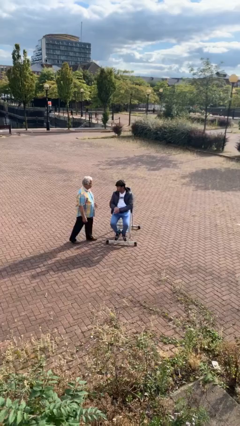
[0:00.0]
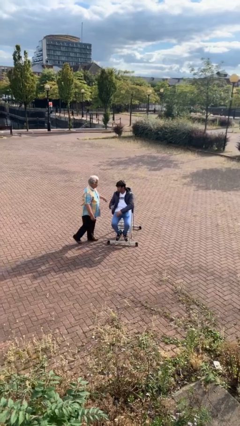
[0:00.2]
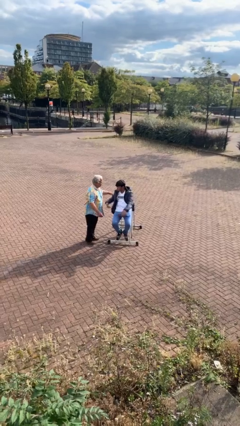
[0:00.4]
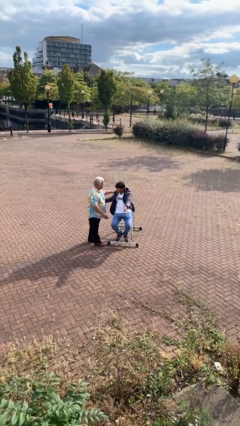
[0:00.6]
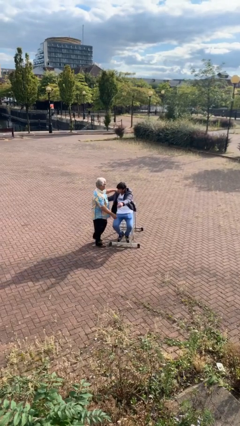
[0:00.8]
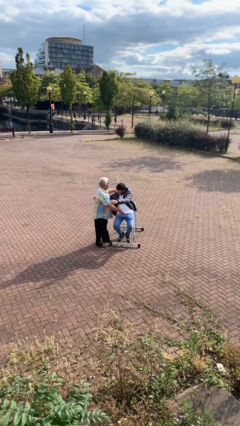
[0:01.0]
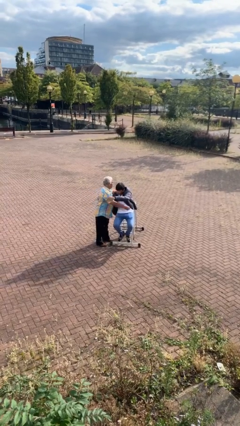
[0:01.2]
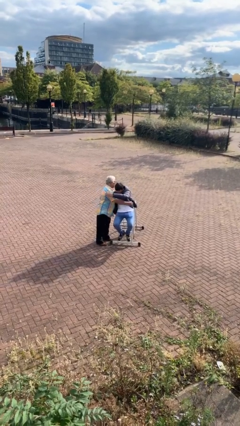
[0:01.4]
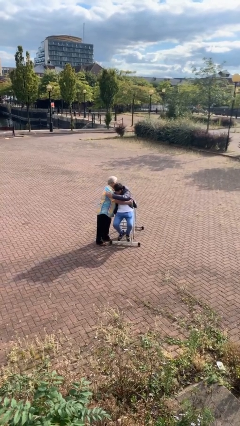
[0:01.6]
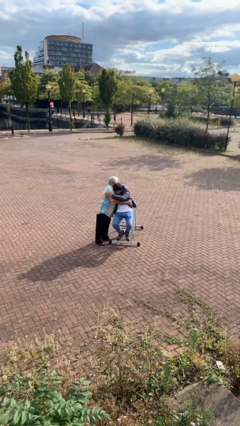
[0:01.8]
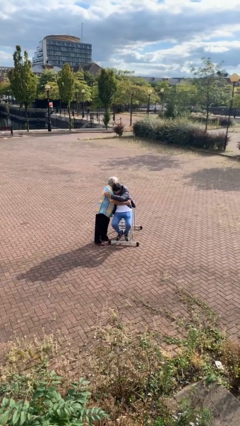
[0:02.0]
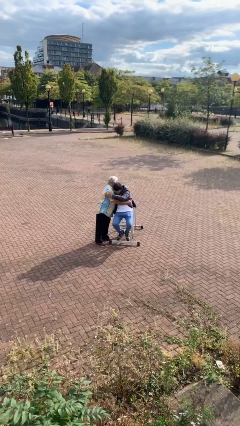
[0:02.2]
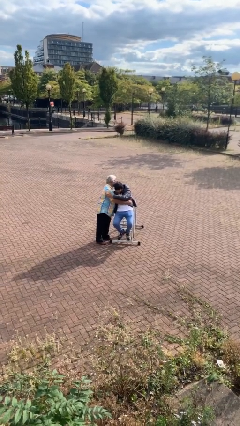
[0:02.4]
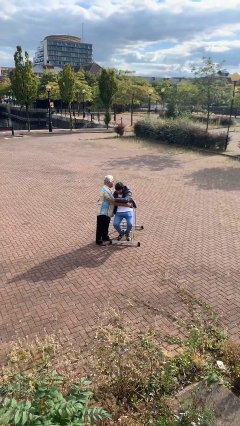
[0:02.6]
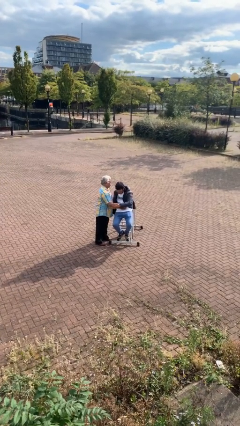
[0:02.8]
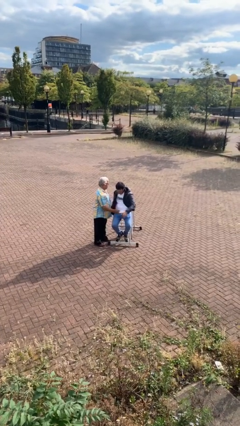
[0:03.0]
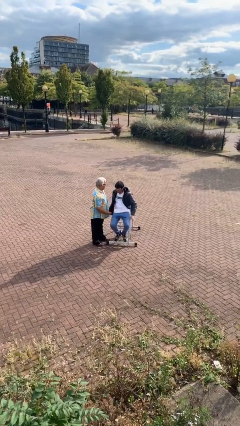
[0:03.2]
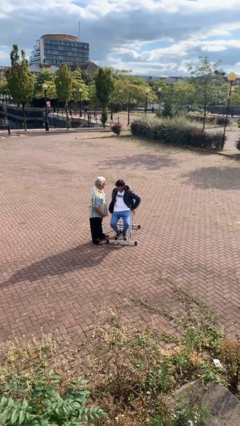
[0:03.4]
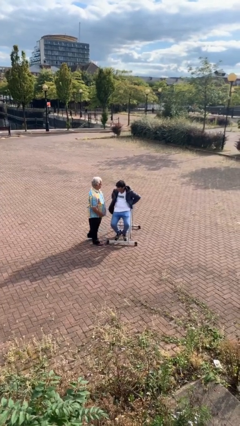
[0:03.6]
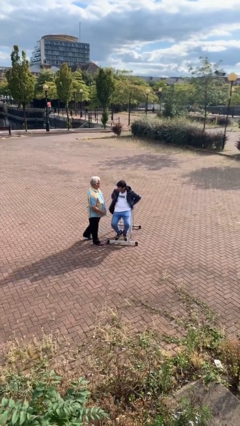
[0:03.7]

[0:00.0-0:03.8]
person embraces person

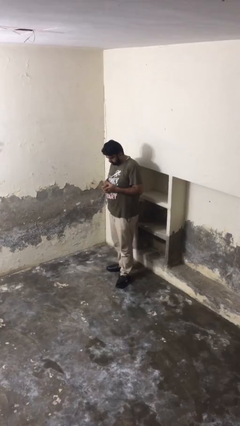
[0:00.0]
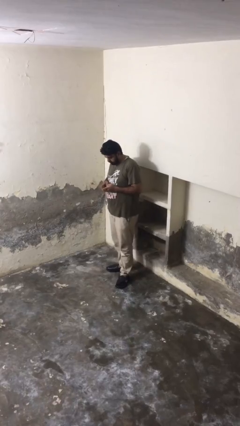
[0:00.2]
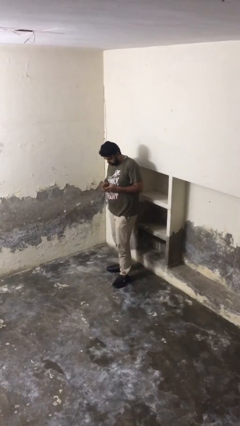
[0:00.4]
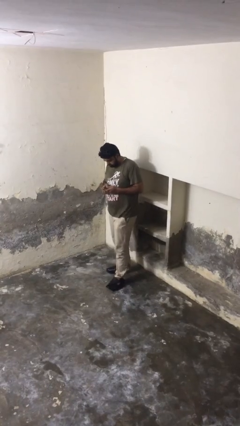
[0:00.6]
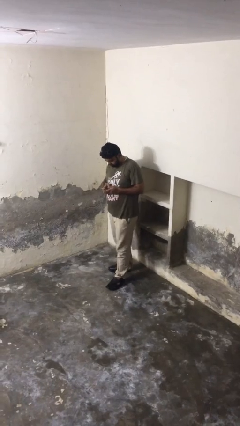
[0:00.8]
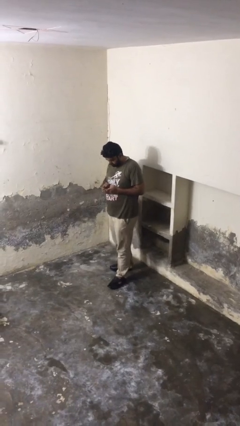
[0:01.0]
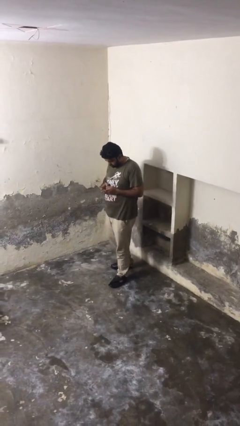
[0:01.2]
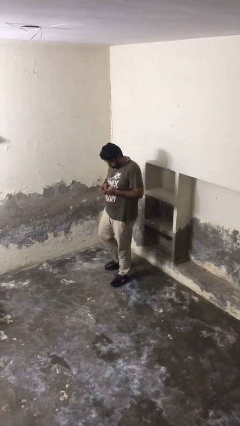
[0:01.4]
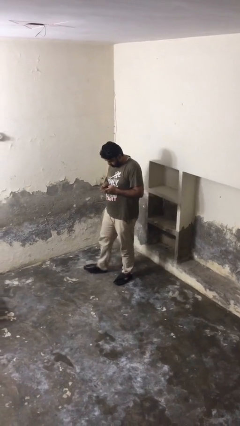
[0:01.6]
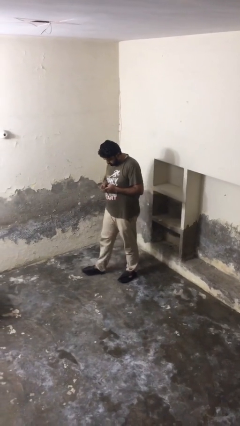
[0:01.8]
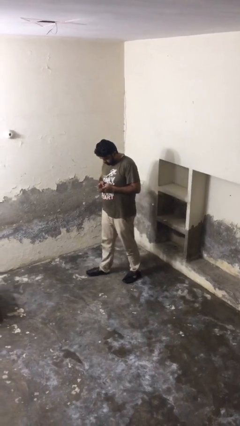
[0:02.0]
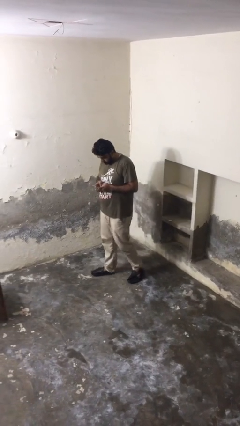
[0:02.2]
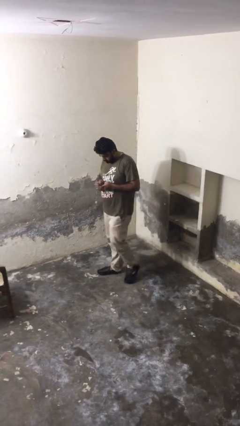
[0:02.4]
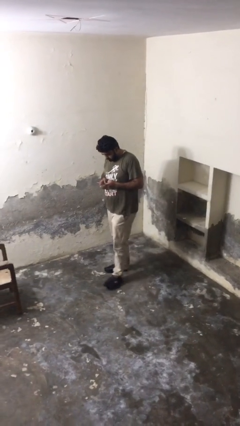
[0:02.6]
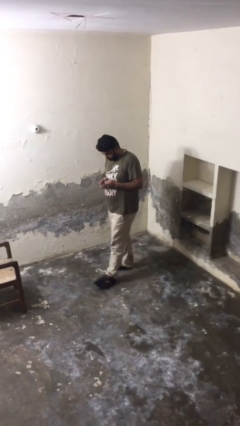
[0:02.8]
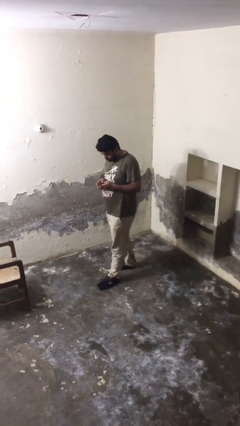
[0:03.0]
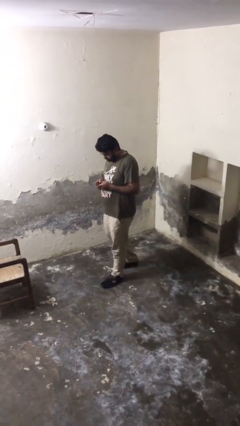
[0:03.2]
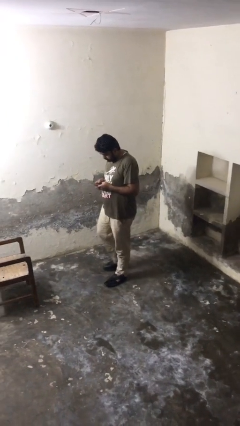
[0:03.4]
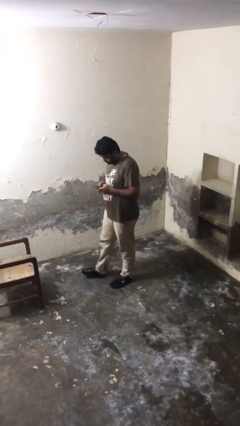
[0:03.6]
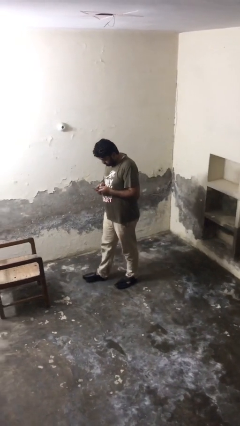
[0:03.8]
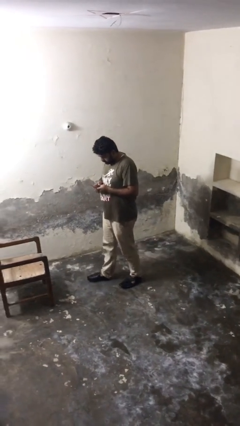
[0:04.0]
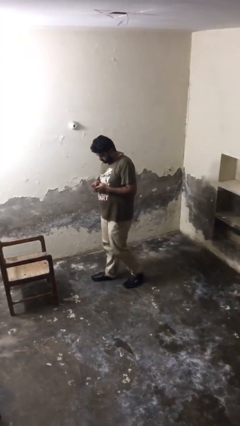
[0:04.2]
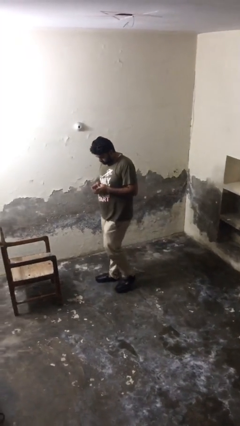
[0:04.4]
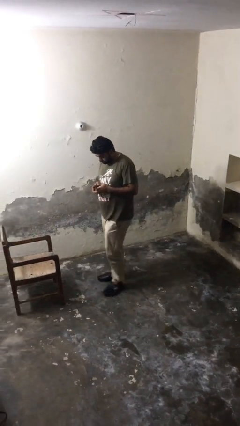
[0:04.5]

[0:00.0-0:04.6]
person texts on phone

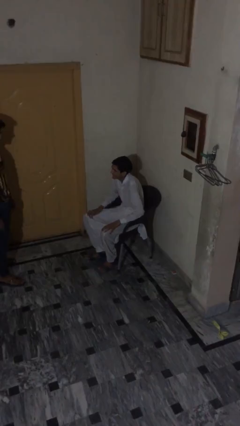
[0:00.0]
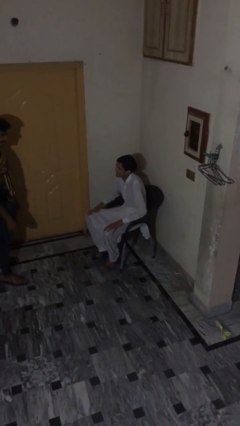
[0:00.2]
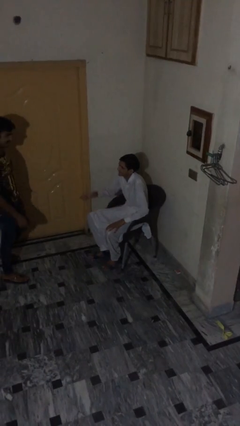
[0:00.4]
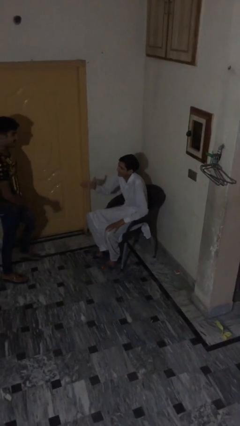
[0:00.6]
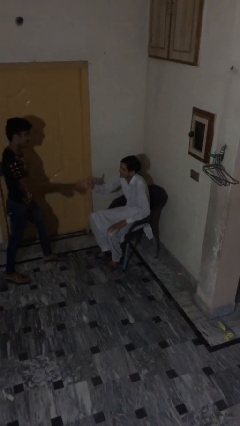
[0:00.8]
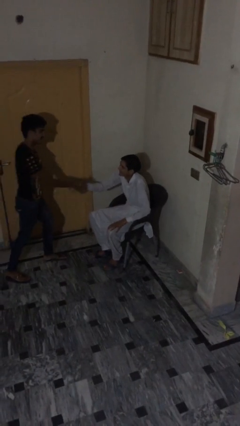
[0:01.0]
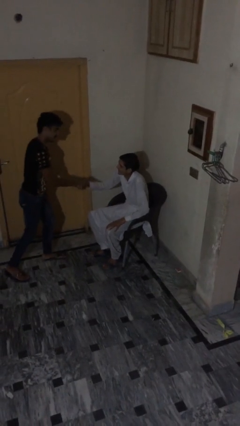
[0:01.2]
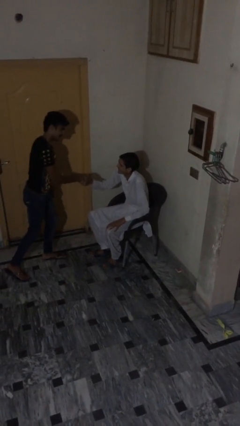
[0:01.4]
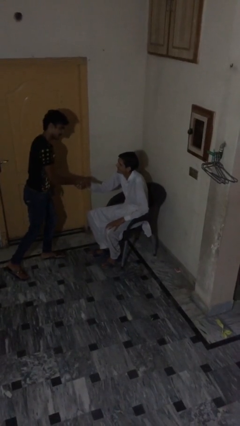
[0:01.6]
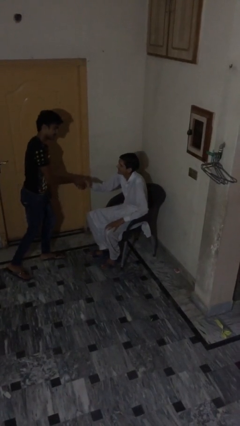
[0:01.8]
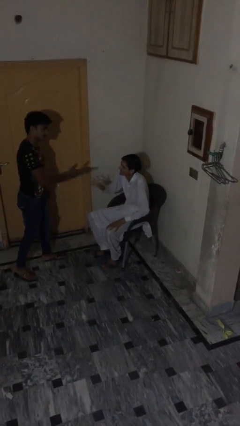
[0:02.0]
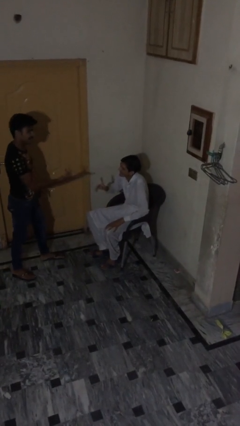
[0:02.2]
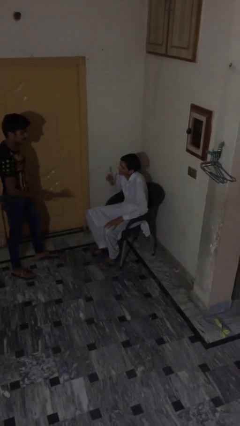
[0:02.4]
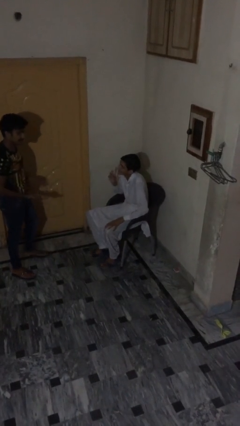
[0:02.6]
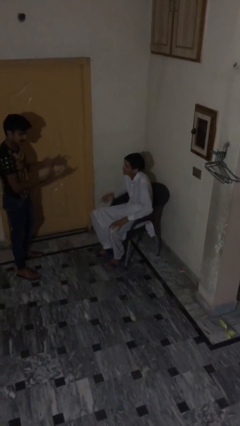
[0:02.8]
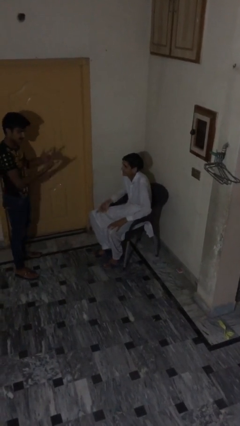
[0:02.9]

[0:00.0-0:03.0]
person shakes hand

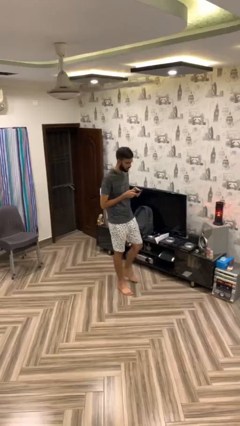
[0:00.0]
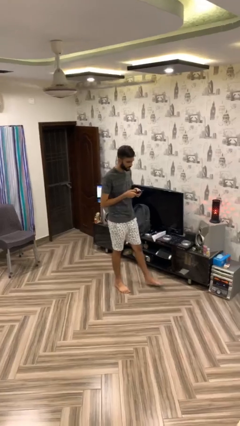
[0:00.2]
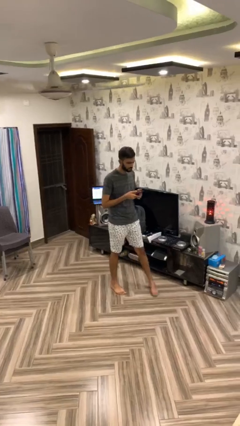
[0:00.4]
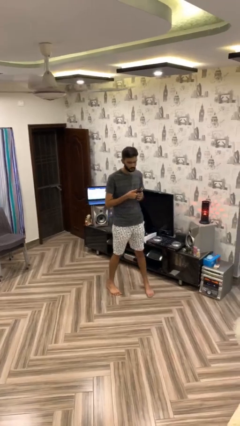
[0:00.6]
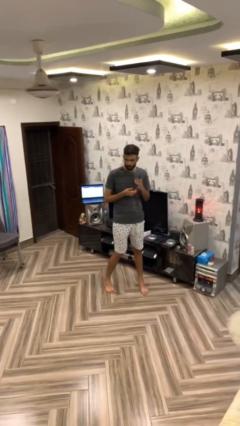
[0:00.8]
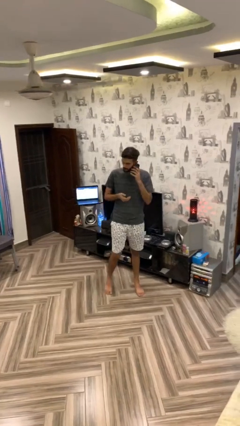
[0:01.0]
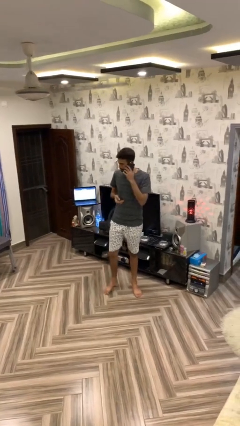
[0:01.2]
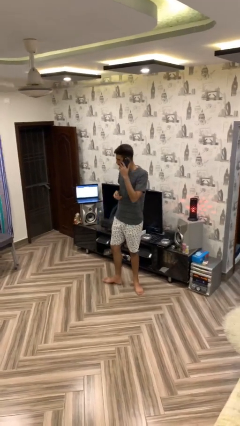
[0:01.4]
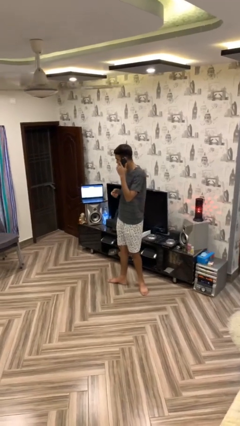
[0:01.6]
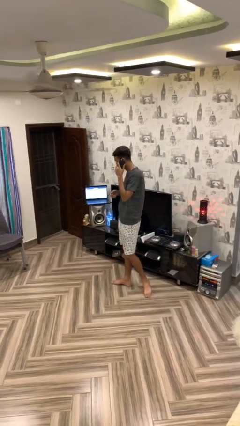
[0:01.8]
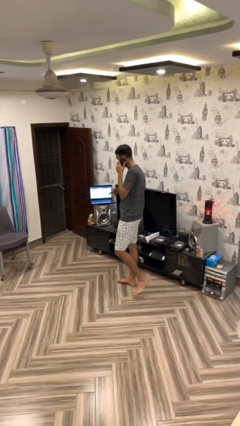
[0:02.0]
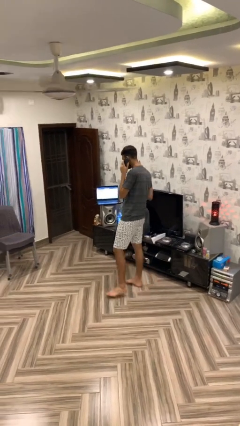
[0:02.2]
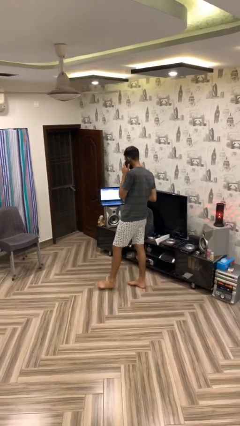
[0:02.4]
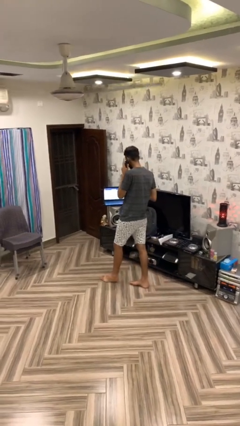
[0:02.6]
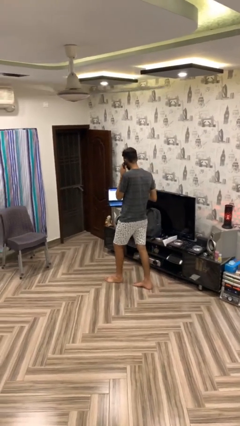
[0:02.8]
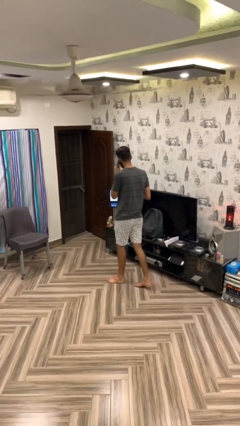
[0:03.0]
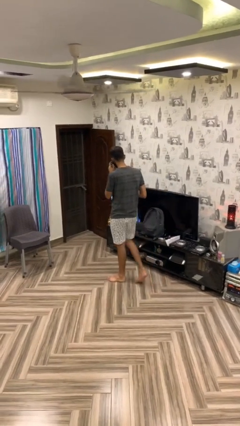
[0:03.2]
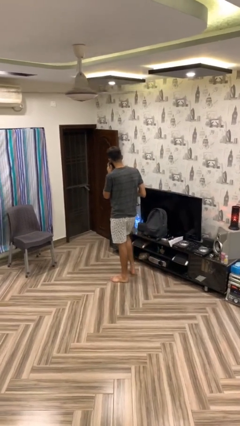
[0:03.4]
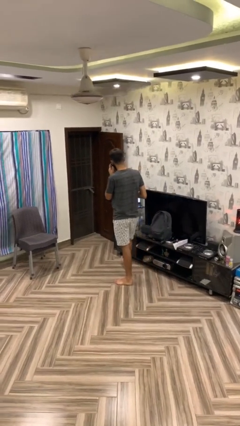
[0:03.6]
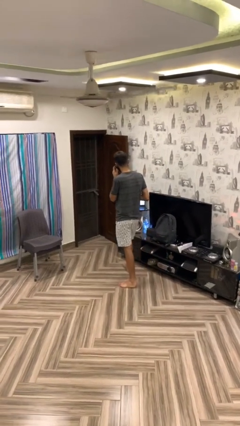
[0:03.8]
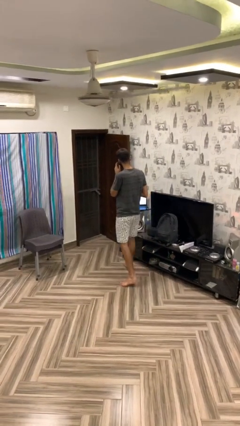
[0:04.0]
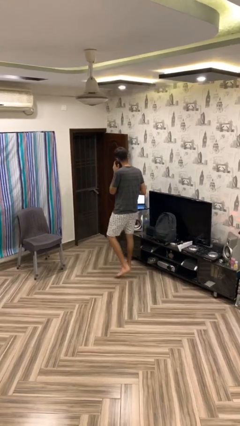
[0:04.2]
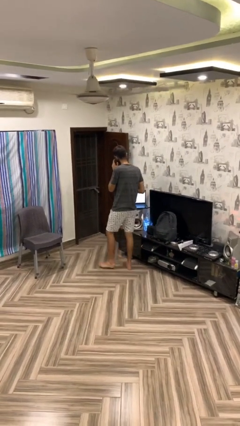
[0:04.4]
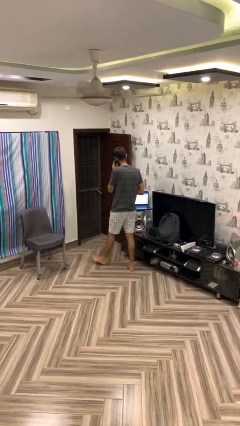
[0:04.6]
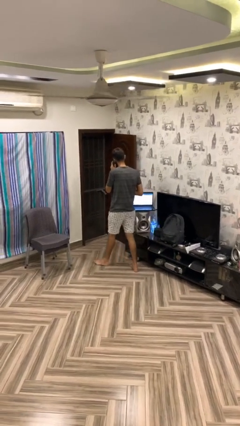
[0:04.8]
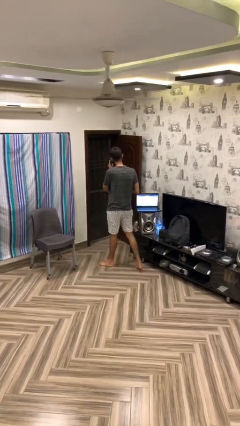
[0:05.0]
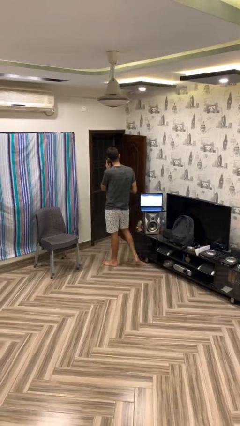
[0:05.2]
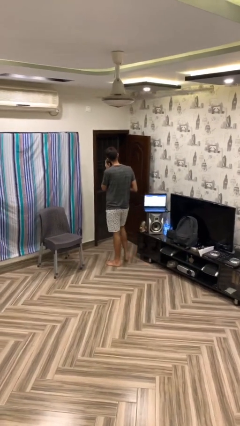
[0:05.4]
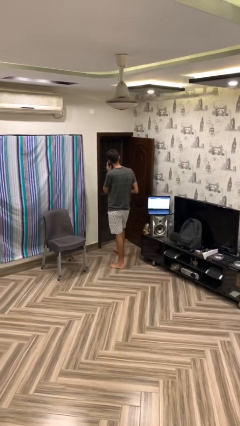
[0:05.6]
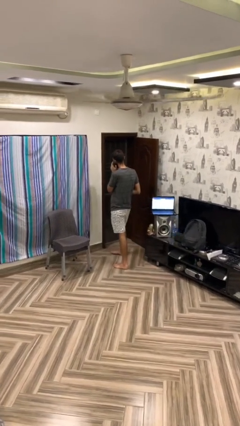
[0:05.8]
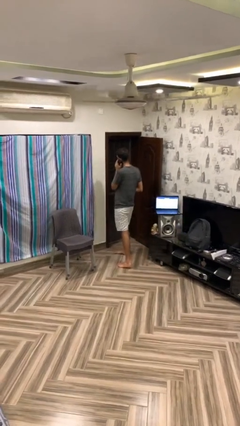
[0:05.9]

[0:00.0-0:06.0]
person talks on phone
